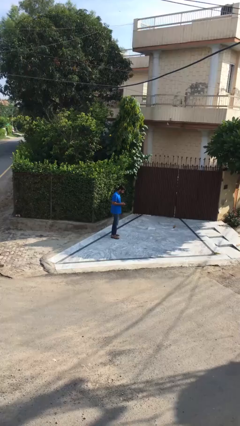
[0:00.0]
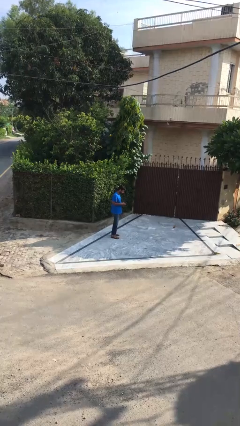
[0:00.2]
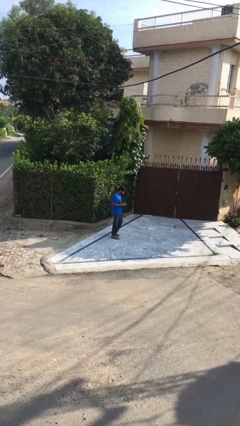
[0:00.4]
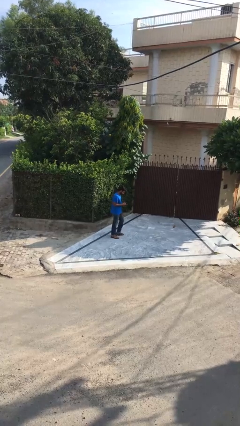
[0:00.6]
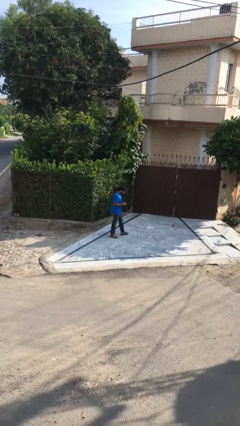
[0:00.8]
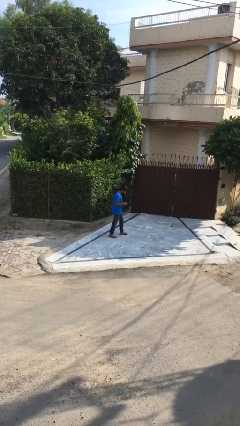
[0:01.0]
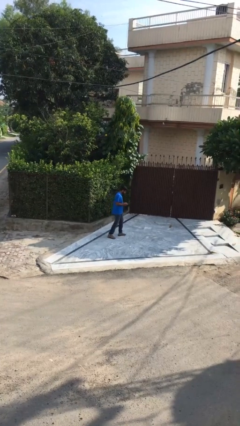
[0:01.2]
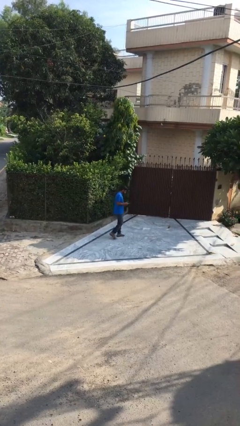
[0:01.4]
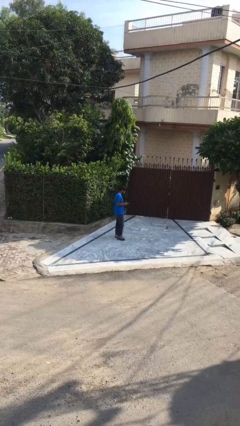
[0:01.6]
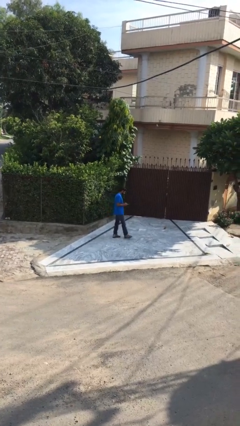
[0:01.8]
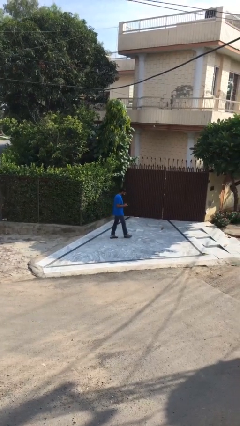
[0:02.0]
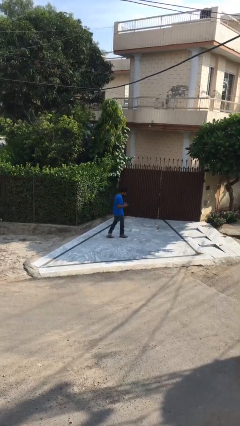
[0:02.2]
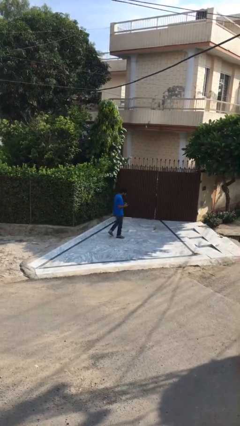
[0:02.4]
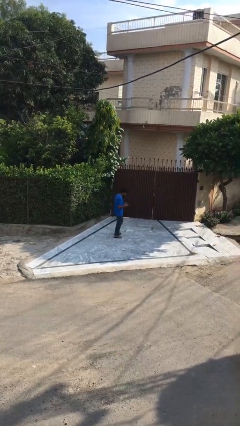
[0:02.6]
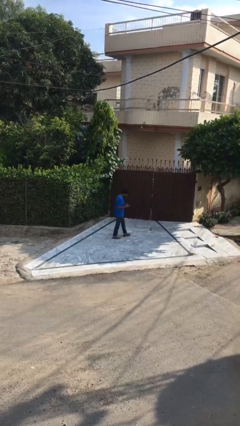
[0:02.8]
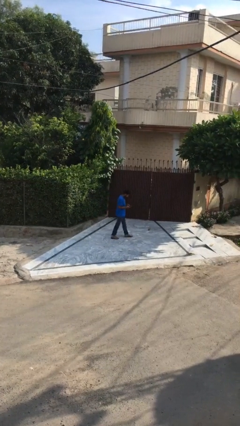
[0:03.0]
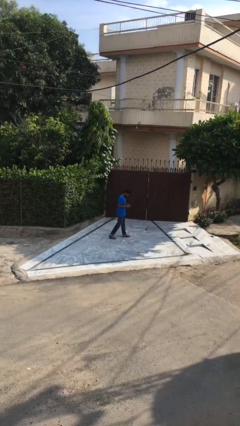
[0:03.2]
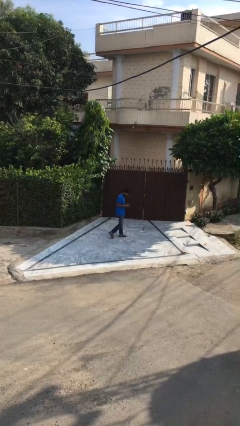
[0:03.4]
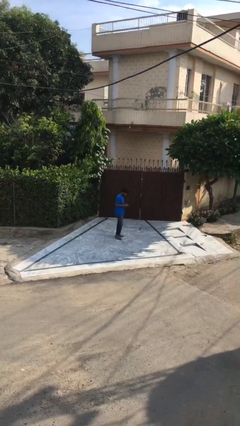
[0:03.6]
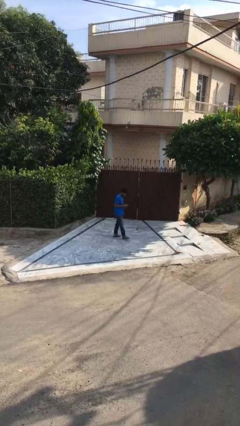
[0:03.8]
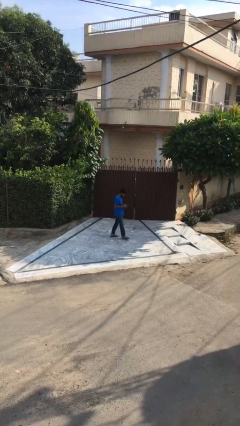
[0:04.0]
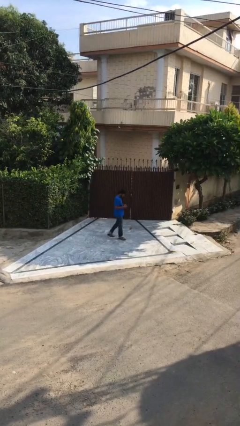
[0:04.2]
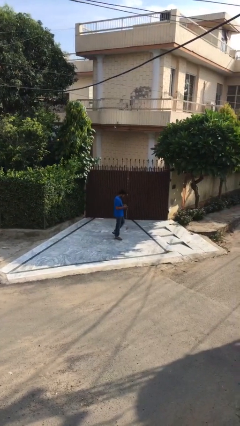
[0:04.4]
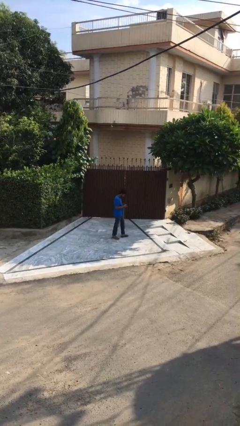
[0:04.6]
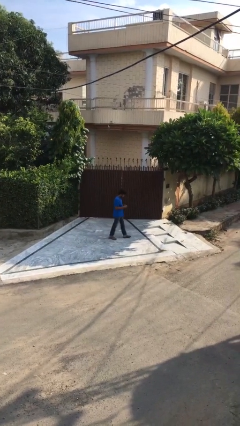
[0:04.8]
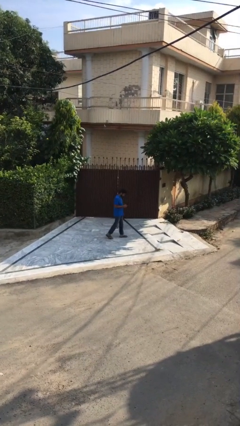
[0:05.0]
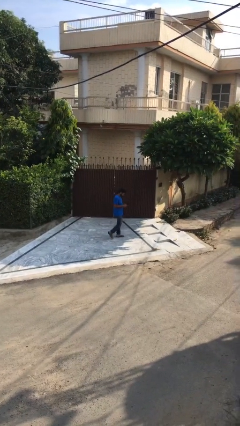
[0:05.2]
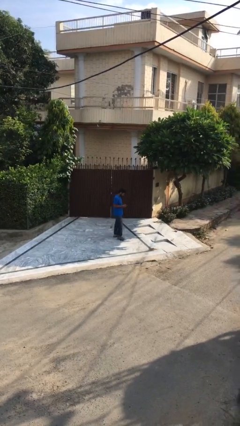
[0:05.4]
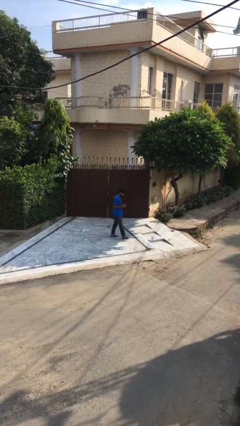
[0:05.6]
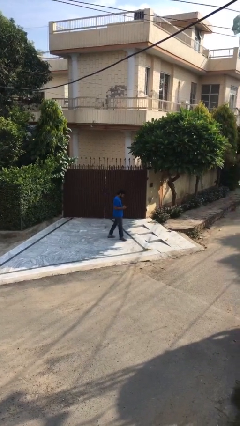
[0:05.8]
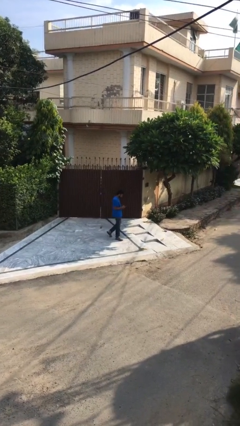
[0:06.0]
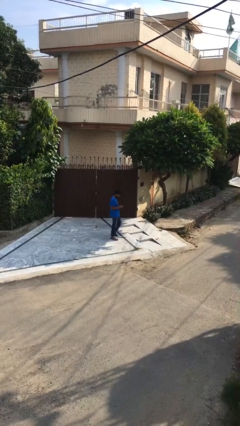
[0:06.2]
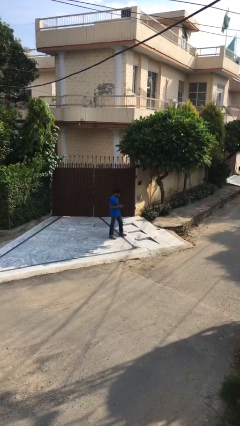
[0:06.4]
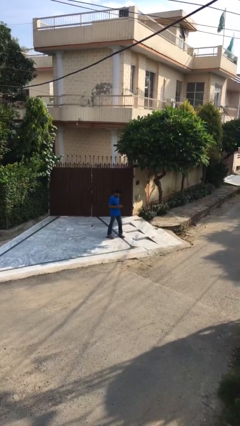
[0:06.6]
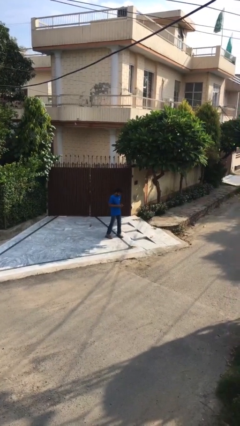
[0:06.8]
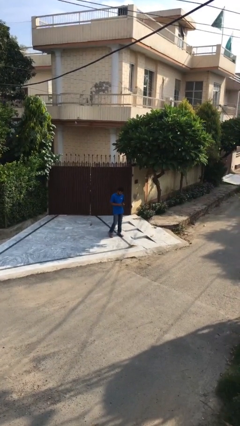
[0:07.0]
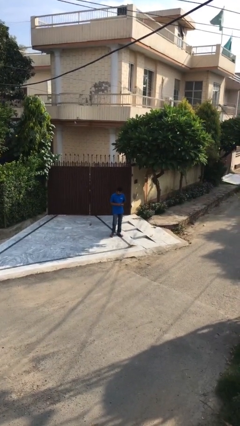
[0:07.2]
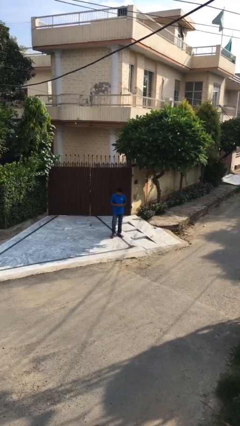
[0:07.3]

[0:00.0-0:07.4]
person texts on phone

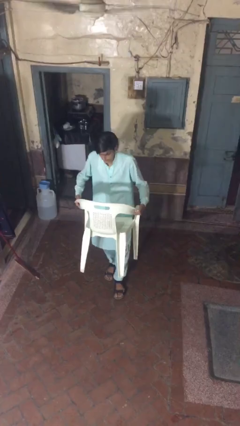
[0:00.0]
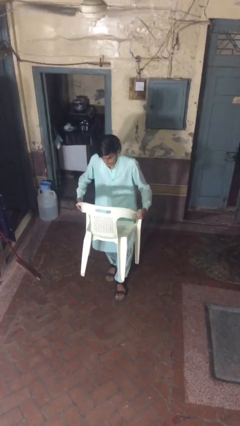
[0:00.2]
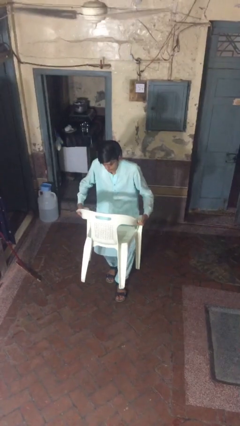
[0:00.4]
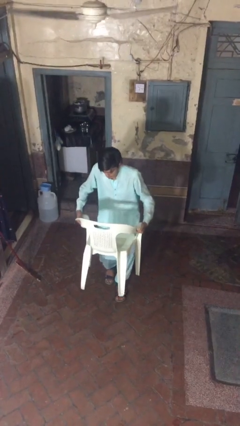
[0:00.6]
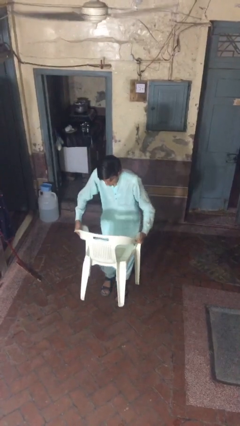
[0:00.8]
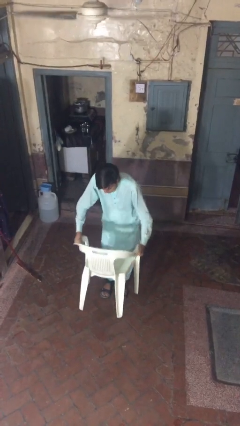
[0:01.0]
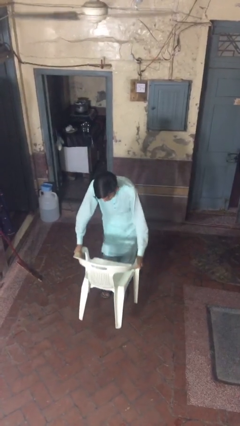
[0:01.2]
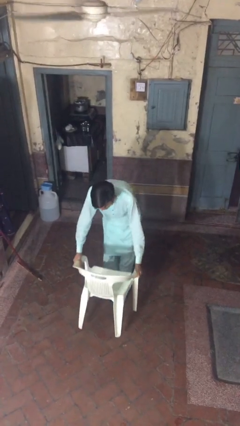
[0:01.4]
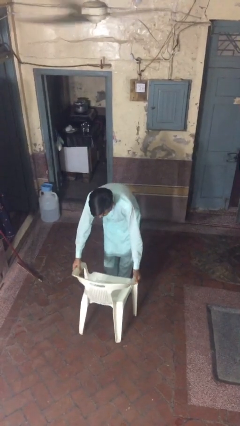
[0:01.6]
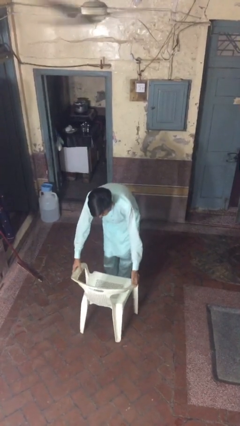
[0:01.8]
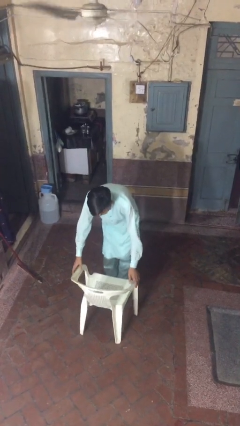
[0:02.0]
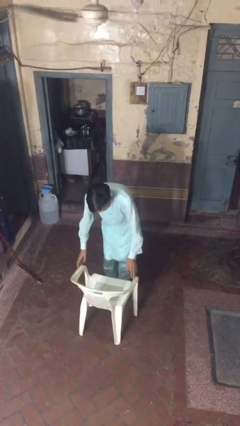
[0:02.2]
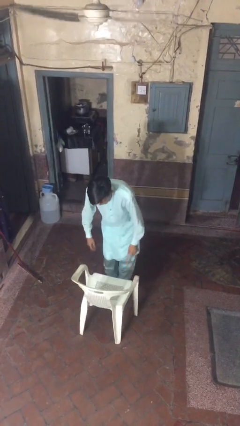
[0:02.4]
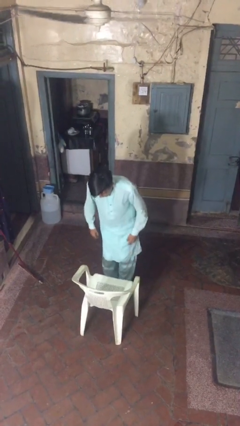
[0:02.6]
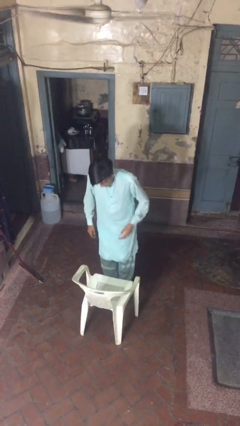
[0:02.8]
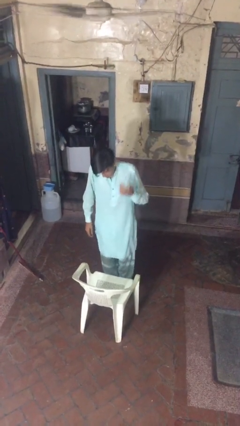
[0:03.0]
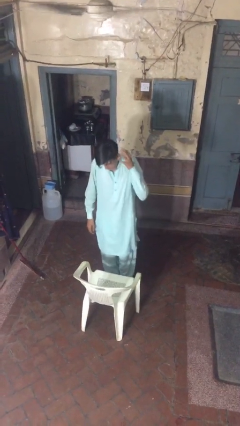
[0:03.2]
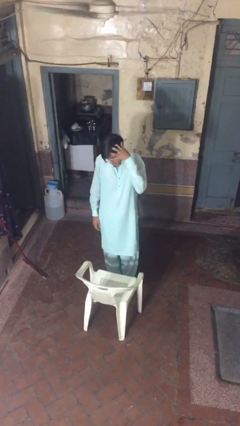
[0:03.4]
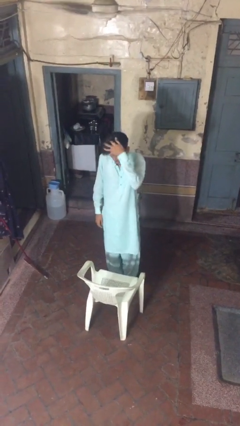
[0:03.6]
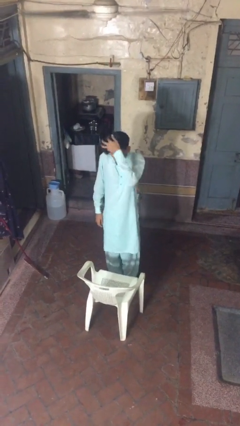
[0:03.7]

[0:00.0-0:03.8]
person puts down object on floor

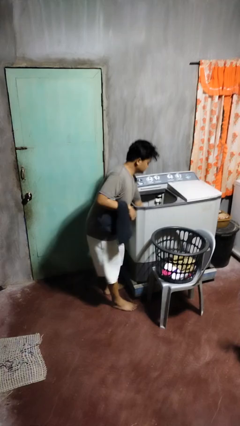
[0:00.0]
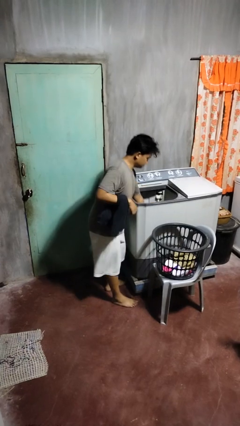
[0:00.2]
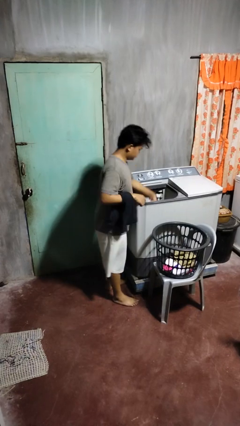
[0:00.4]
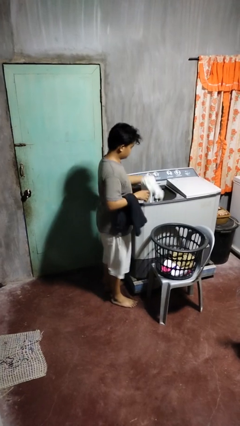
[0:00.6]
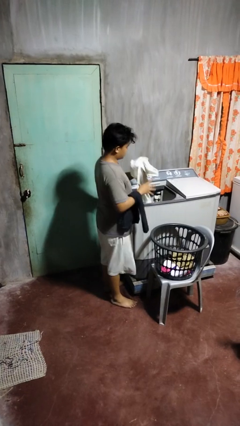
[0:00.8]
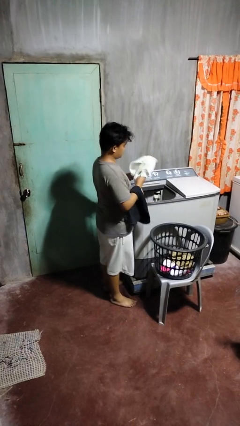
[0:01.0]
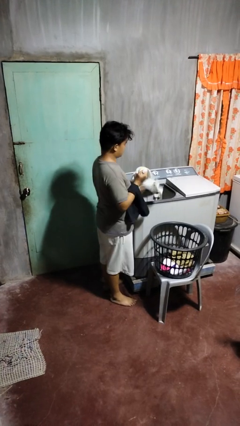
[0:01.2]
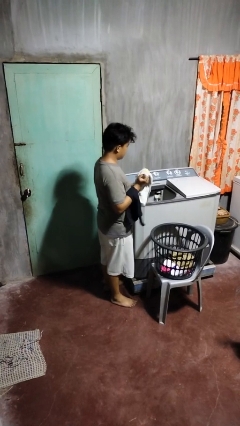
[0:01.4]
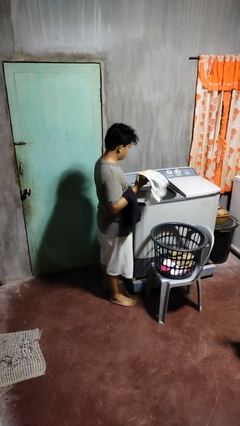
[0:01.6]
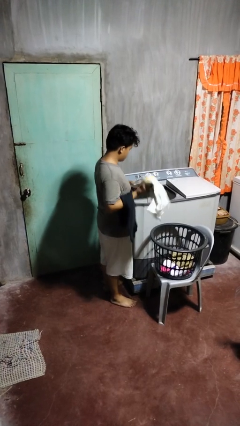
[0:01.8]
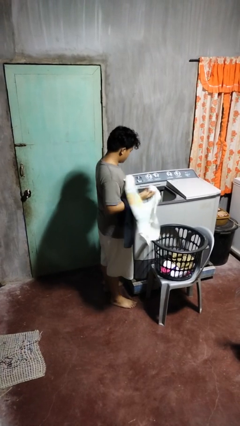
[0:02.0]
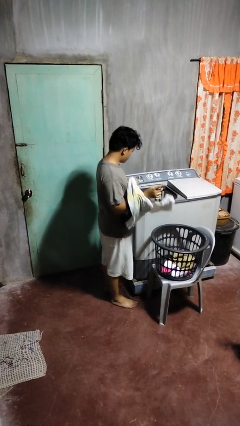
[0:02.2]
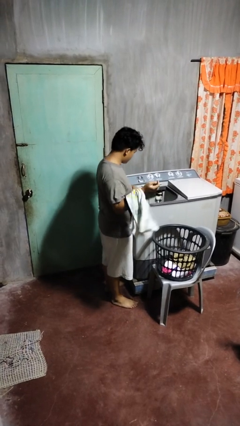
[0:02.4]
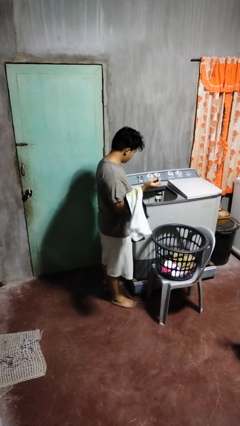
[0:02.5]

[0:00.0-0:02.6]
person unloads clotheswasher

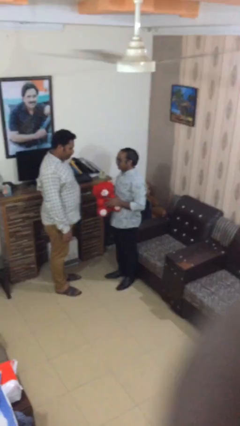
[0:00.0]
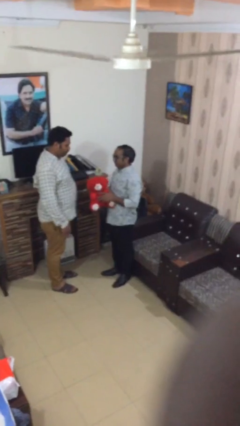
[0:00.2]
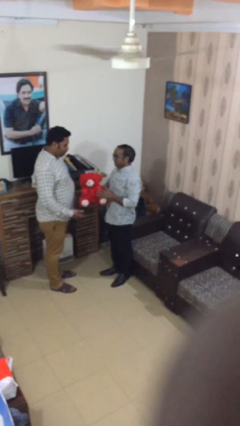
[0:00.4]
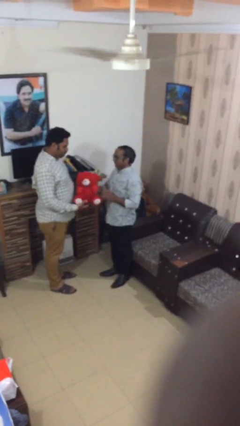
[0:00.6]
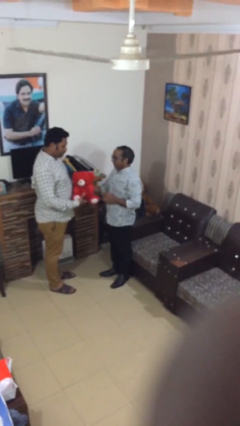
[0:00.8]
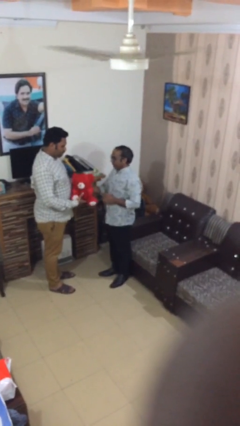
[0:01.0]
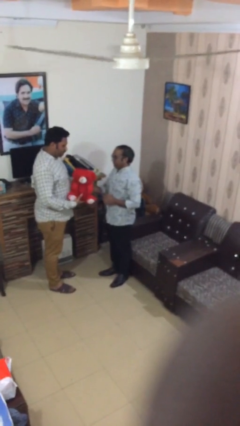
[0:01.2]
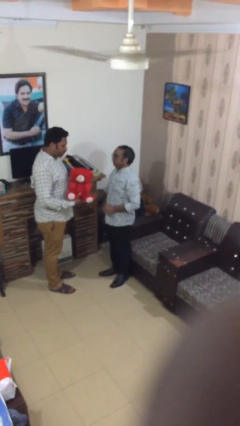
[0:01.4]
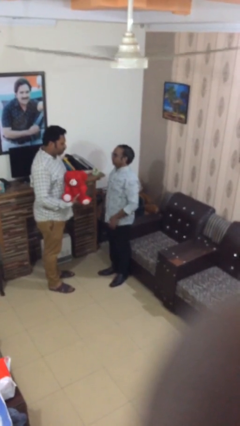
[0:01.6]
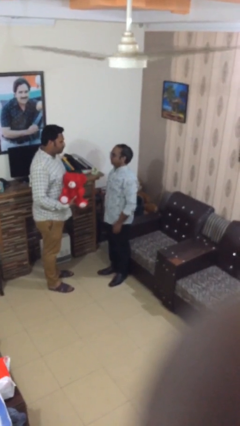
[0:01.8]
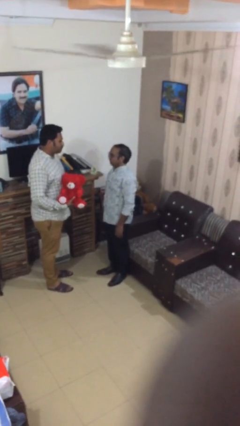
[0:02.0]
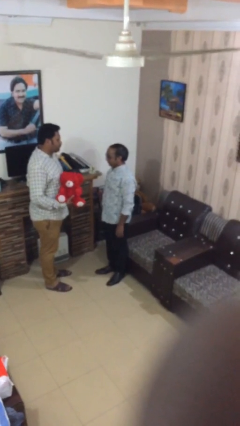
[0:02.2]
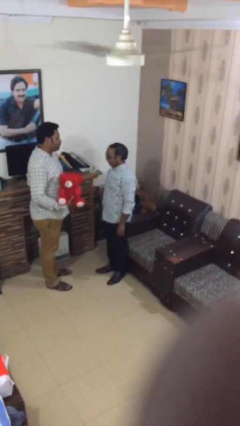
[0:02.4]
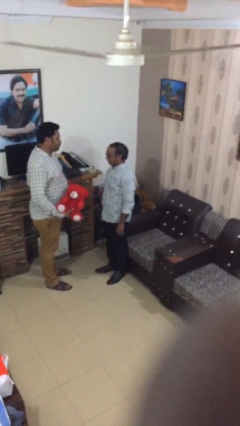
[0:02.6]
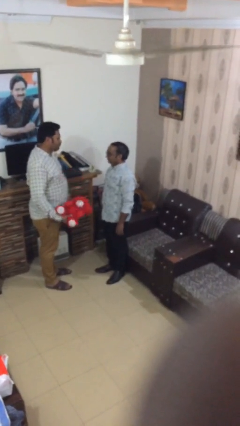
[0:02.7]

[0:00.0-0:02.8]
person transfers object to person

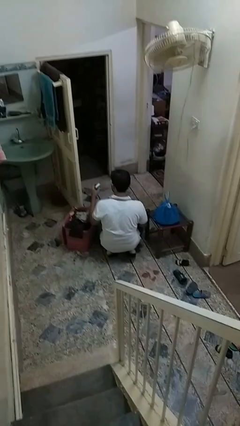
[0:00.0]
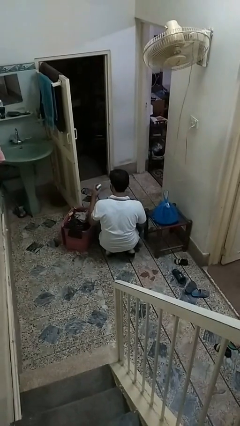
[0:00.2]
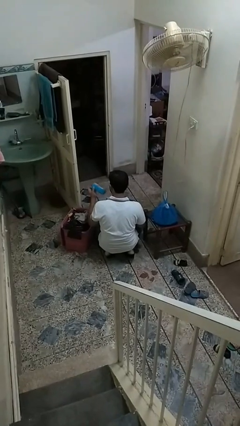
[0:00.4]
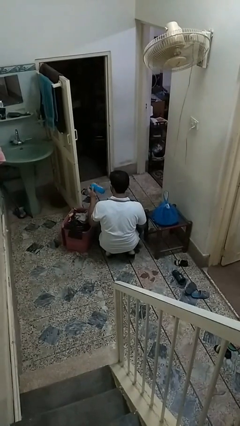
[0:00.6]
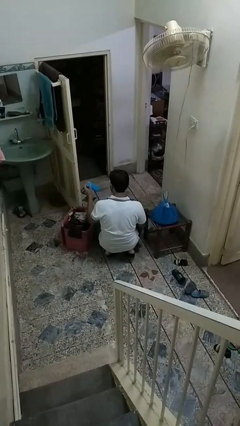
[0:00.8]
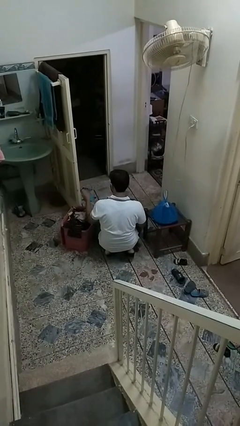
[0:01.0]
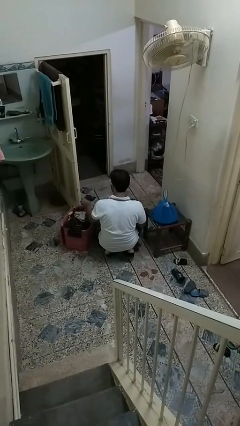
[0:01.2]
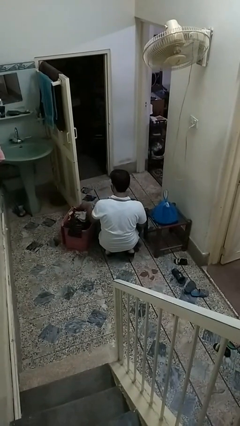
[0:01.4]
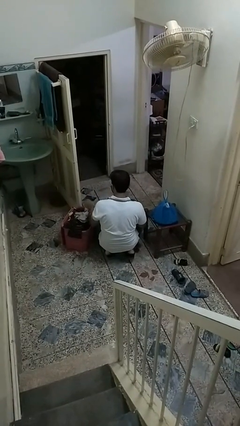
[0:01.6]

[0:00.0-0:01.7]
person puts object into basket
